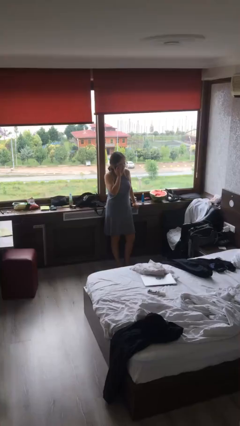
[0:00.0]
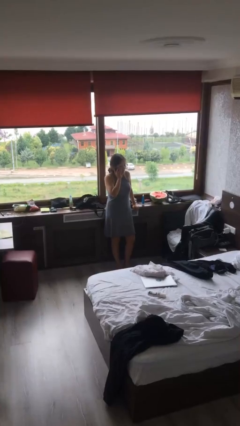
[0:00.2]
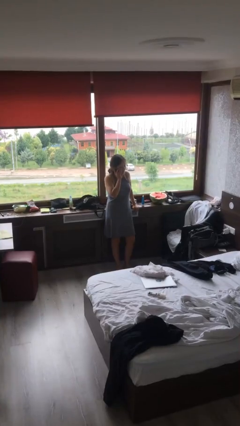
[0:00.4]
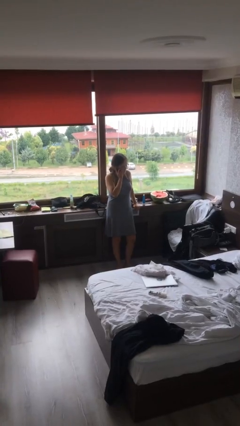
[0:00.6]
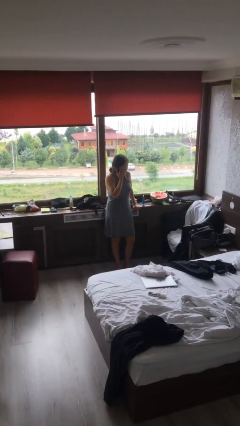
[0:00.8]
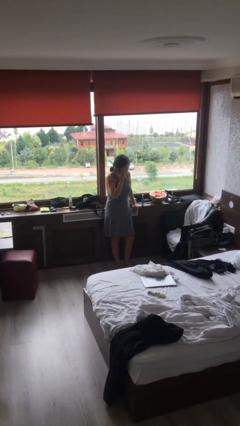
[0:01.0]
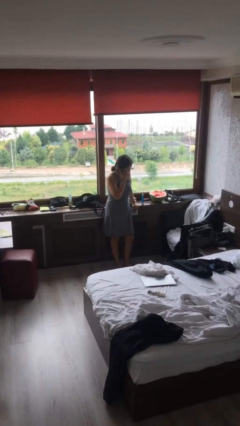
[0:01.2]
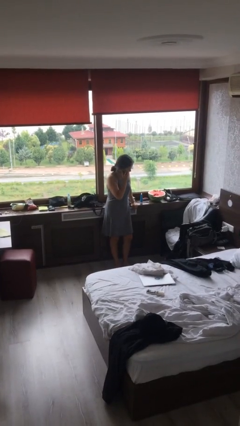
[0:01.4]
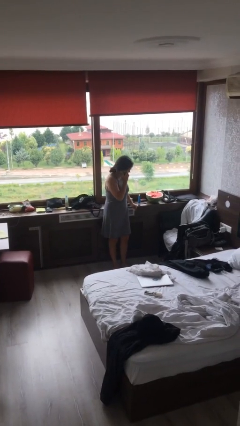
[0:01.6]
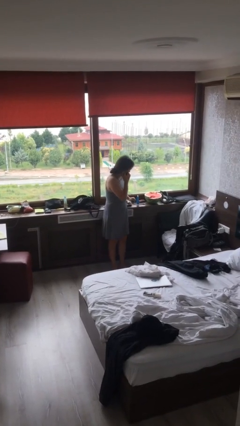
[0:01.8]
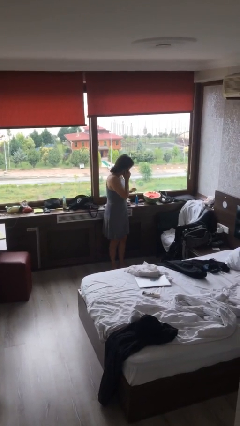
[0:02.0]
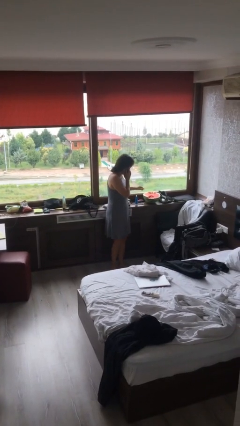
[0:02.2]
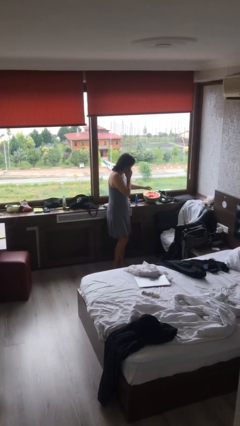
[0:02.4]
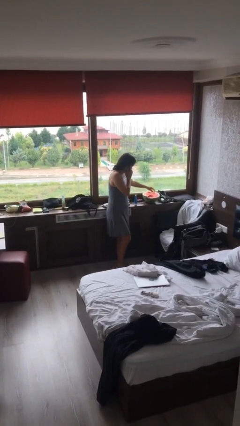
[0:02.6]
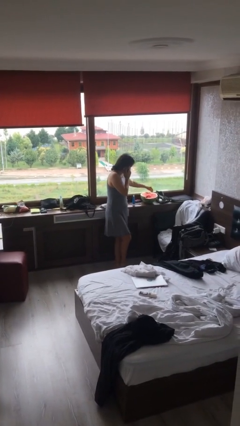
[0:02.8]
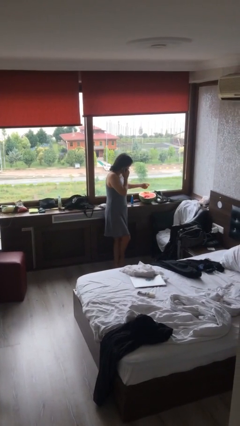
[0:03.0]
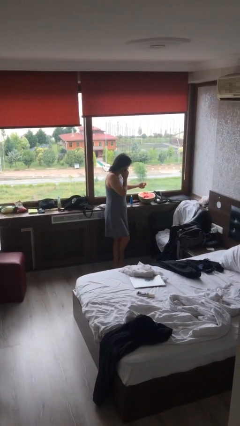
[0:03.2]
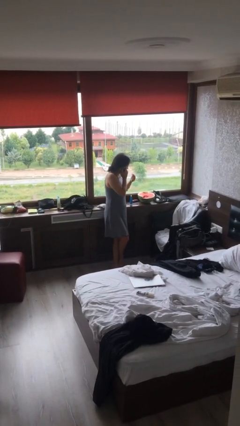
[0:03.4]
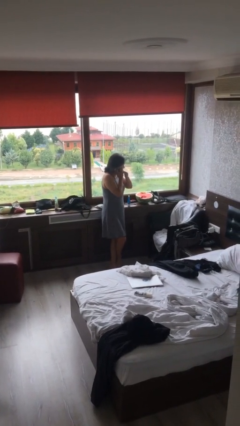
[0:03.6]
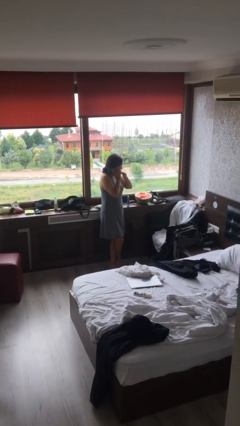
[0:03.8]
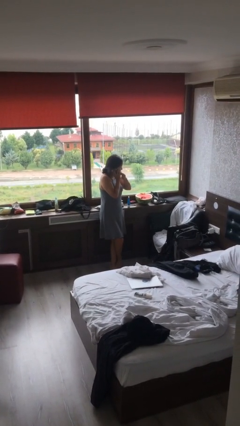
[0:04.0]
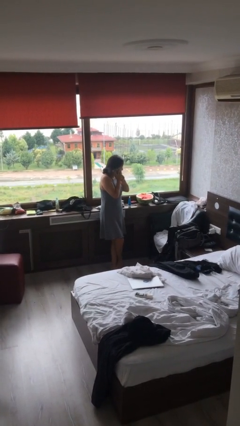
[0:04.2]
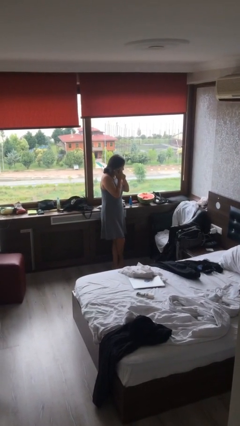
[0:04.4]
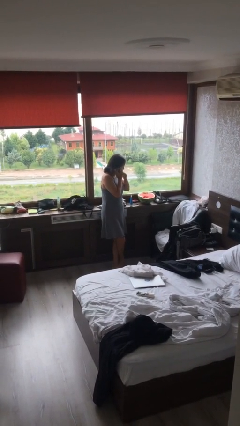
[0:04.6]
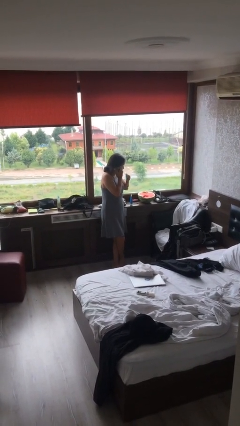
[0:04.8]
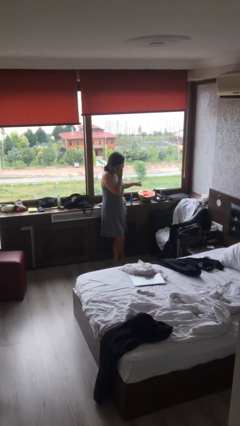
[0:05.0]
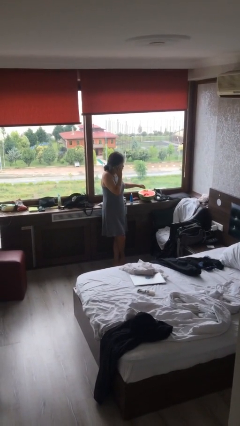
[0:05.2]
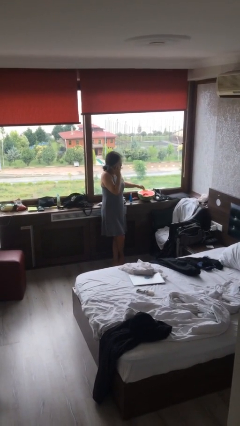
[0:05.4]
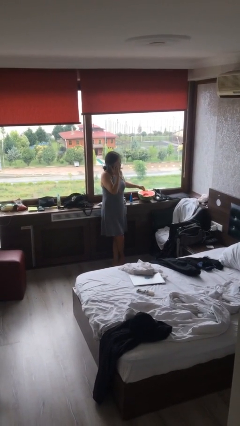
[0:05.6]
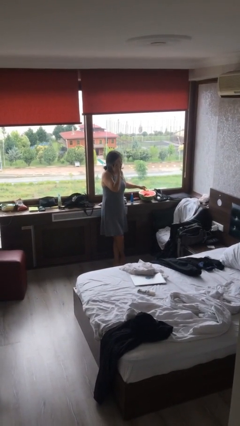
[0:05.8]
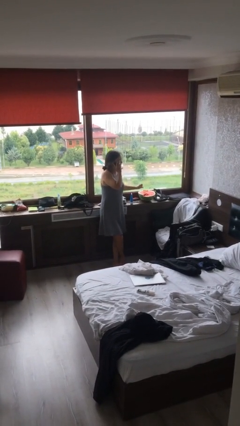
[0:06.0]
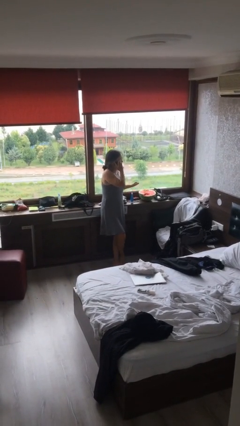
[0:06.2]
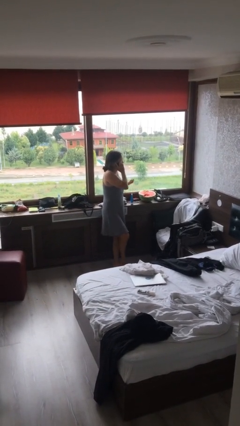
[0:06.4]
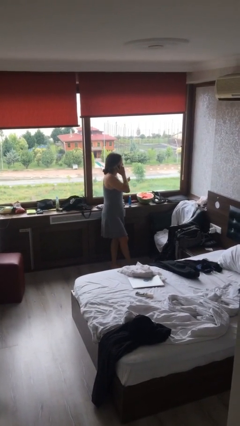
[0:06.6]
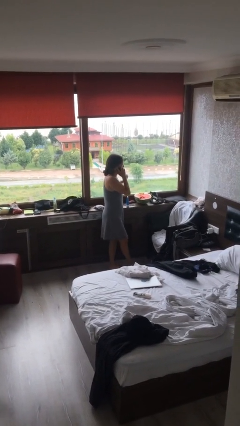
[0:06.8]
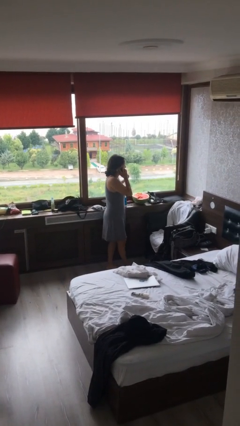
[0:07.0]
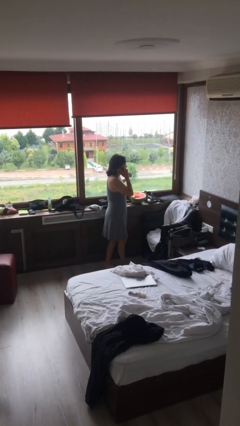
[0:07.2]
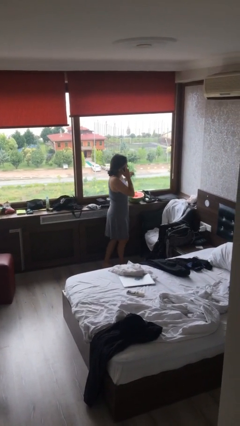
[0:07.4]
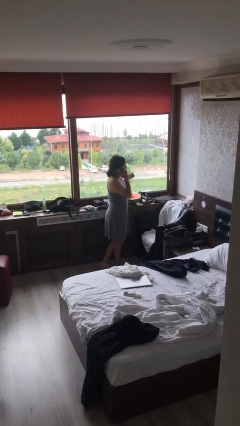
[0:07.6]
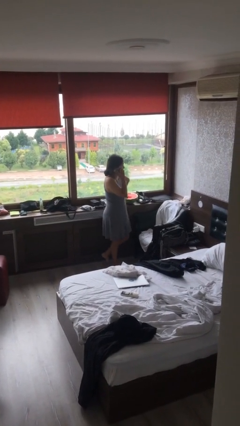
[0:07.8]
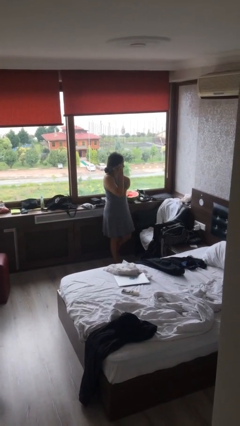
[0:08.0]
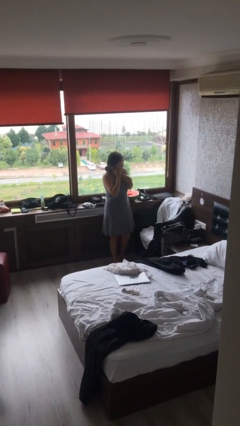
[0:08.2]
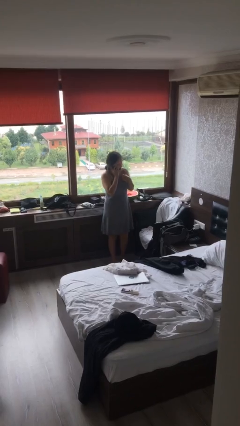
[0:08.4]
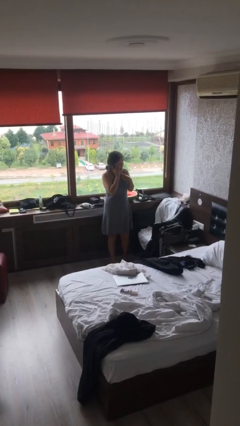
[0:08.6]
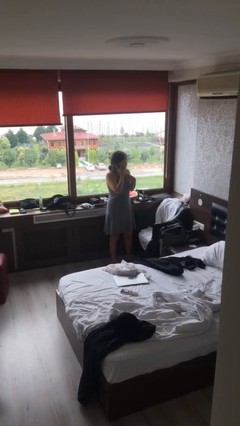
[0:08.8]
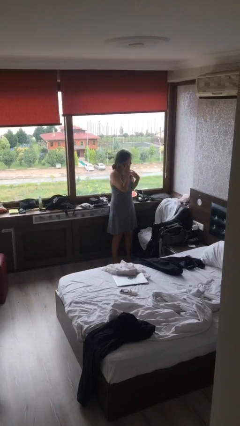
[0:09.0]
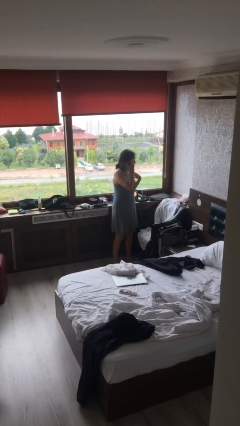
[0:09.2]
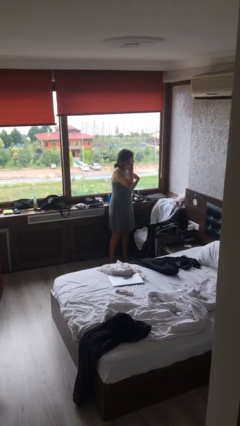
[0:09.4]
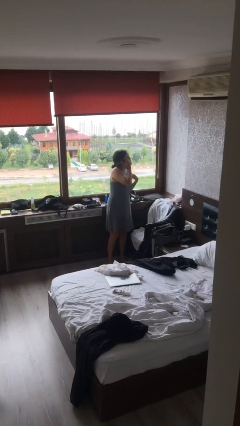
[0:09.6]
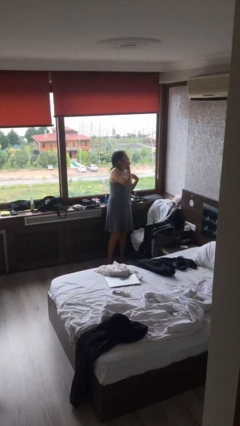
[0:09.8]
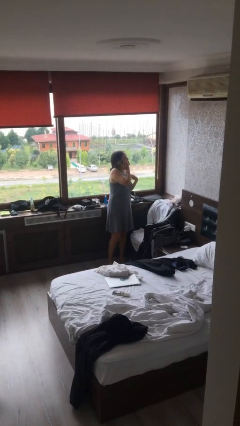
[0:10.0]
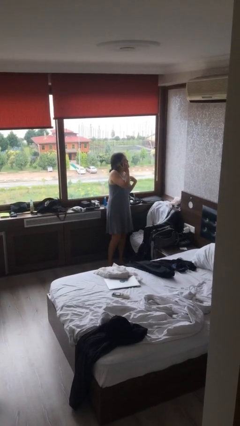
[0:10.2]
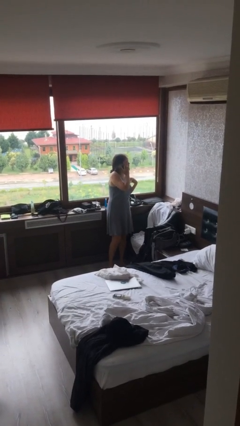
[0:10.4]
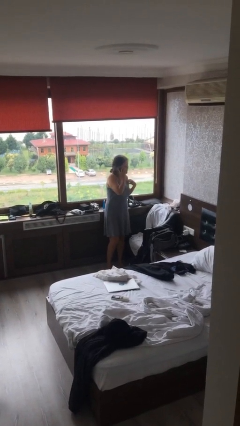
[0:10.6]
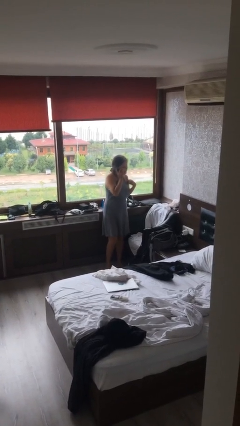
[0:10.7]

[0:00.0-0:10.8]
person talks on phone

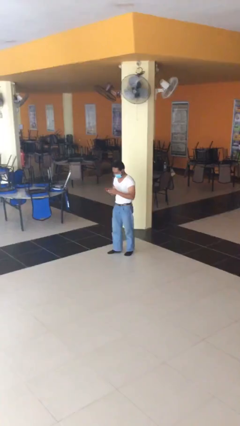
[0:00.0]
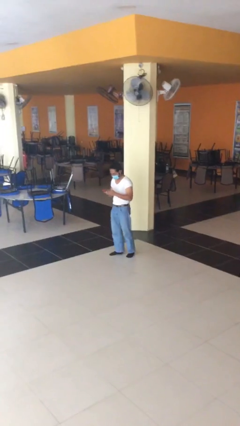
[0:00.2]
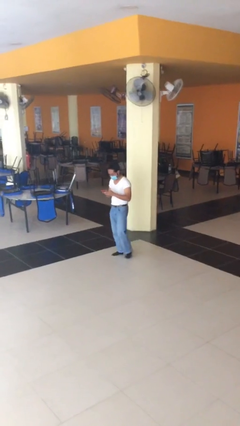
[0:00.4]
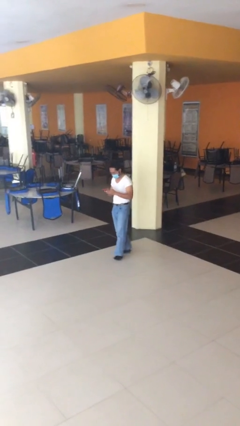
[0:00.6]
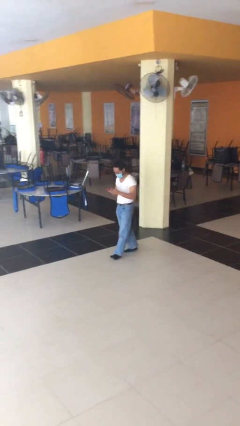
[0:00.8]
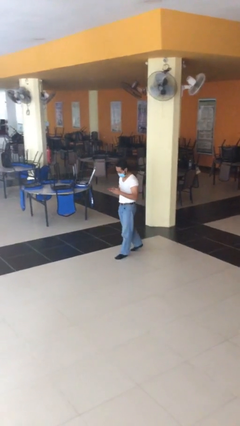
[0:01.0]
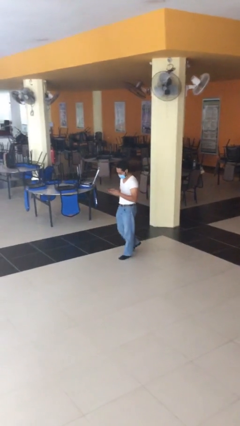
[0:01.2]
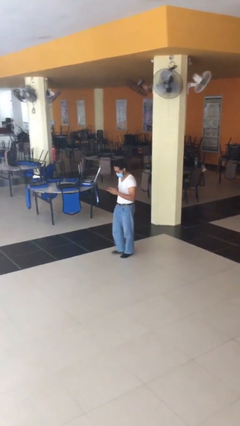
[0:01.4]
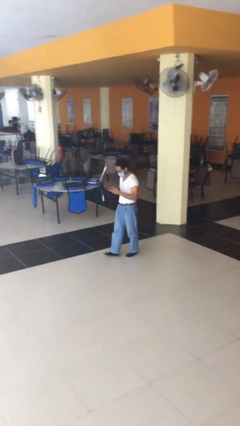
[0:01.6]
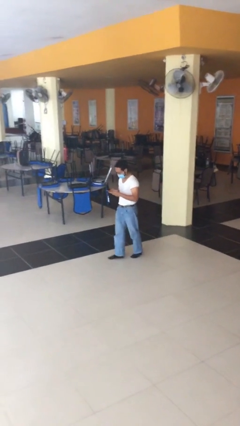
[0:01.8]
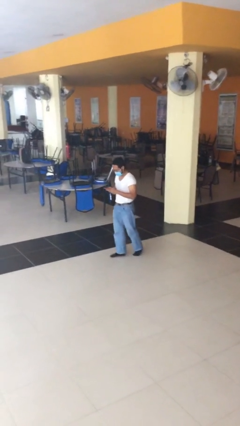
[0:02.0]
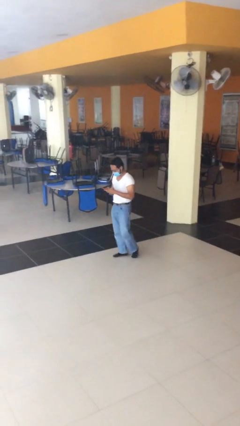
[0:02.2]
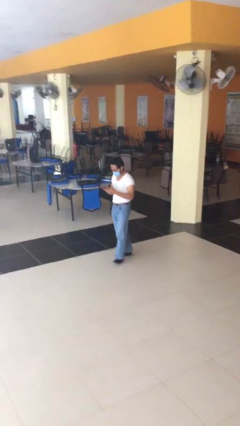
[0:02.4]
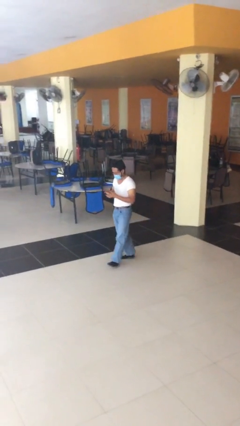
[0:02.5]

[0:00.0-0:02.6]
person texts on phone

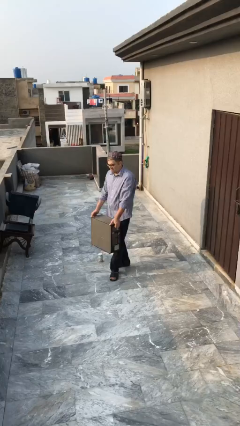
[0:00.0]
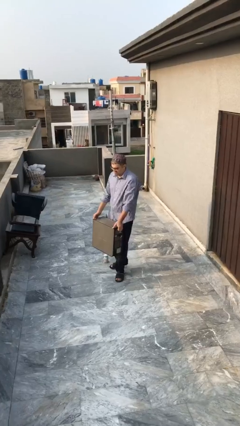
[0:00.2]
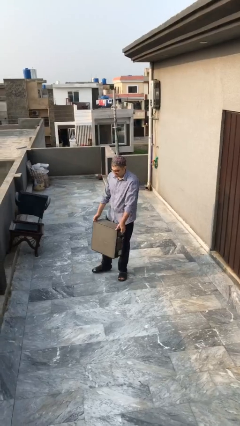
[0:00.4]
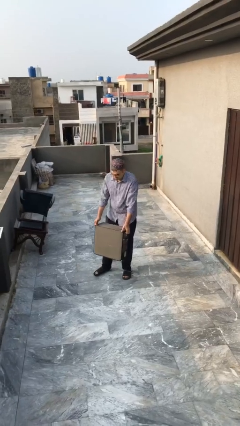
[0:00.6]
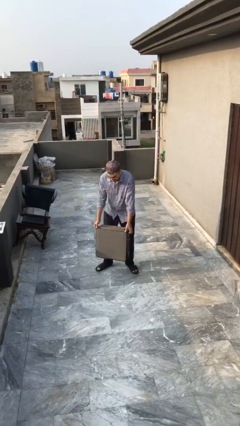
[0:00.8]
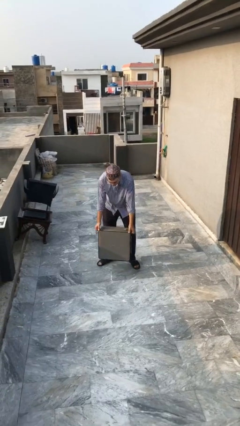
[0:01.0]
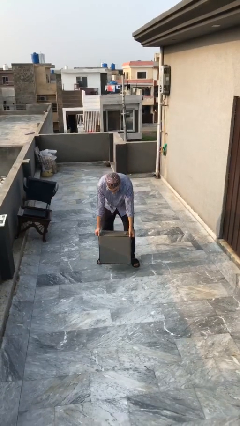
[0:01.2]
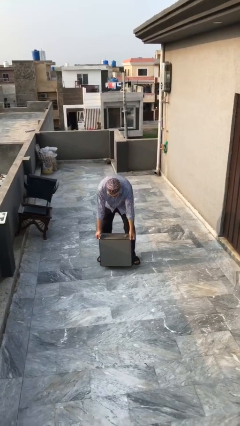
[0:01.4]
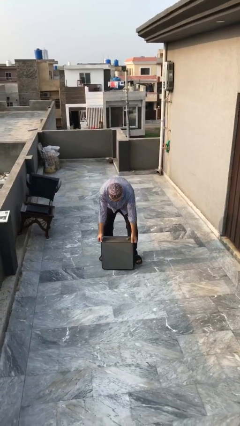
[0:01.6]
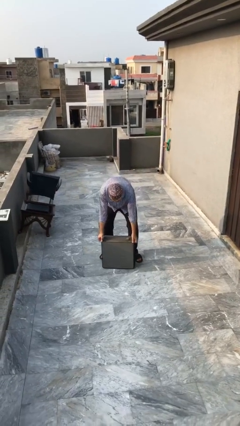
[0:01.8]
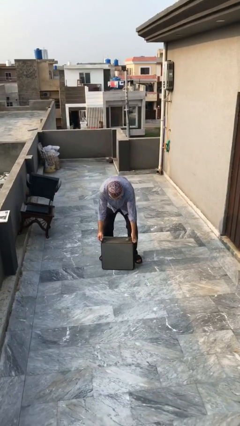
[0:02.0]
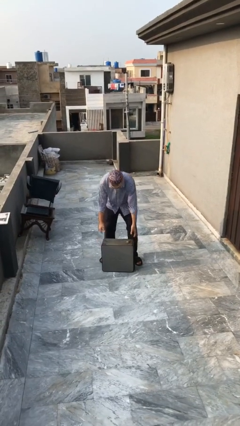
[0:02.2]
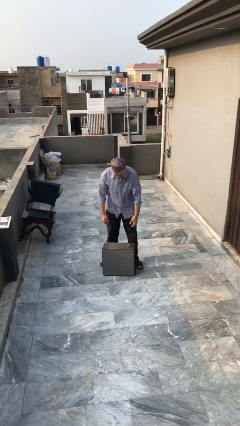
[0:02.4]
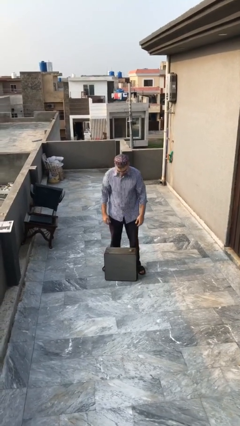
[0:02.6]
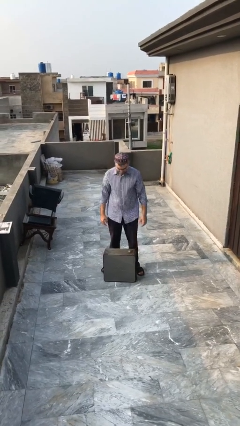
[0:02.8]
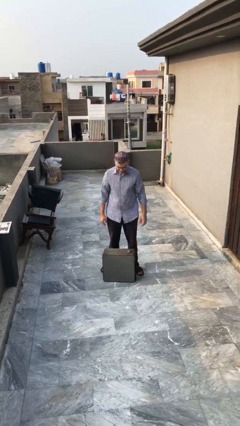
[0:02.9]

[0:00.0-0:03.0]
person puts down object on floor

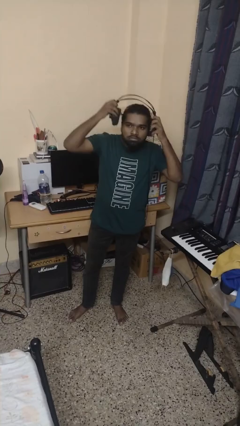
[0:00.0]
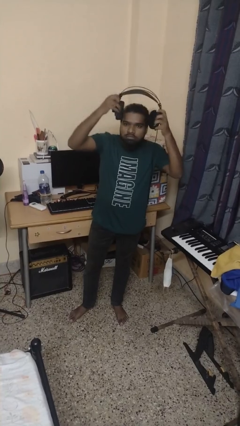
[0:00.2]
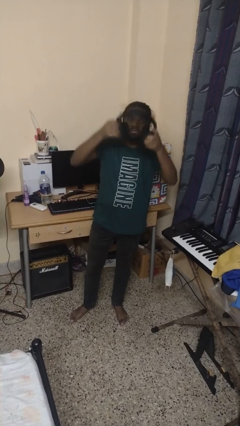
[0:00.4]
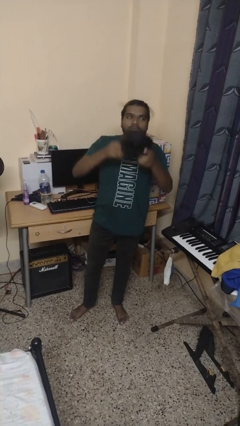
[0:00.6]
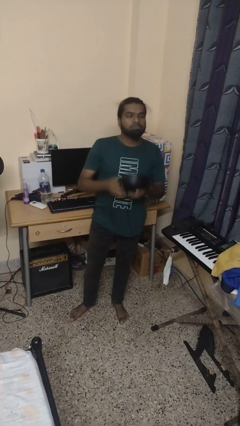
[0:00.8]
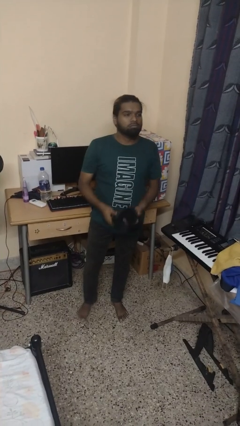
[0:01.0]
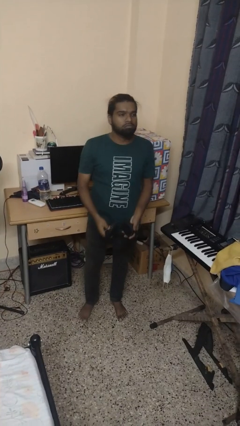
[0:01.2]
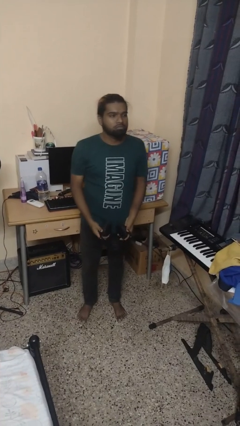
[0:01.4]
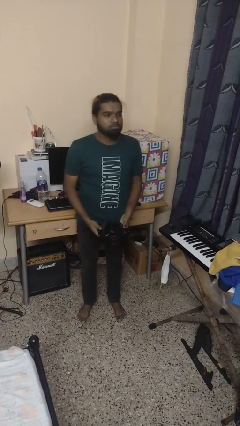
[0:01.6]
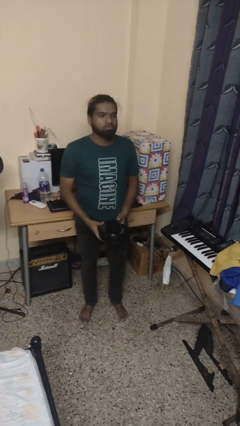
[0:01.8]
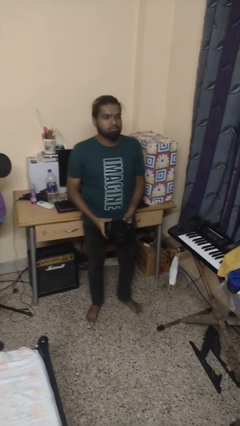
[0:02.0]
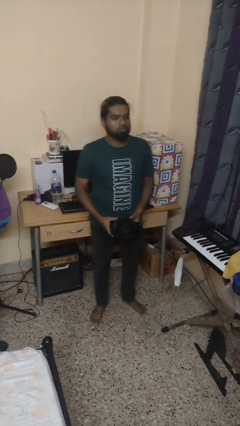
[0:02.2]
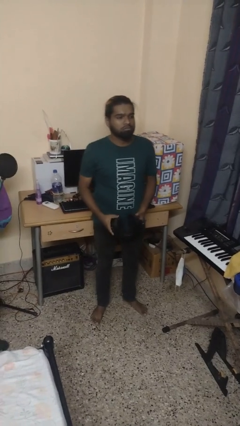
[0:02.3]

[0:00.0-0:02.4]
person takes off headphones
